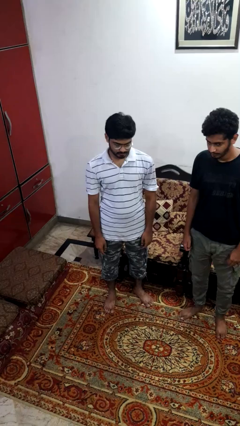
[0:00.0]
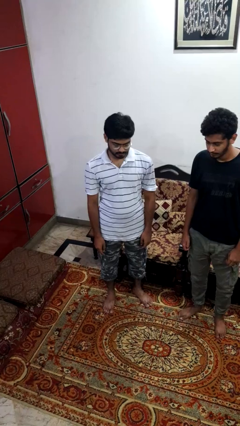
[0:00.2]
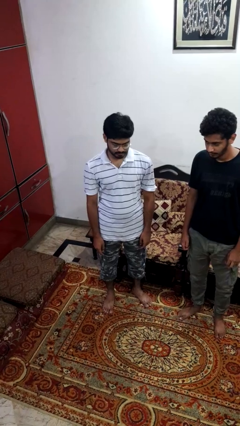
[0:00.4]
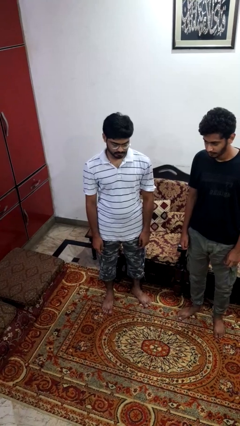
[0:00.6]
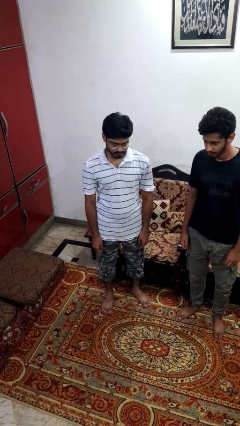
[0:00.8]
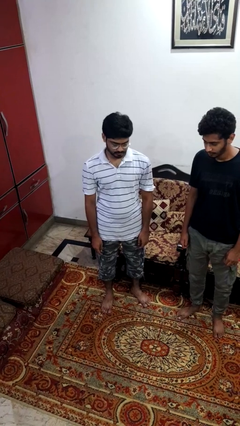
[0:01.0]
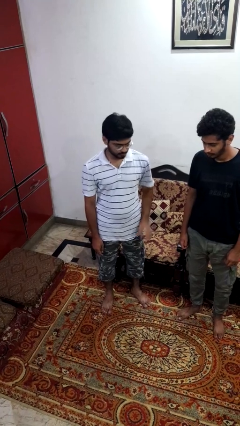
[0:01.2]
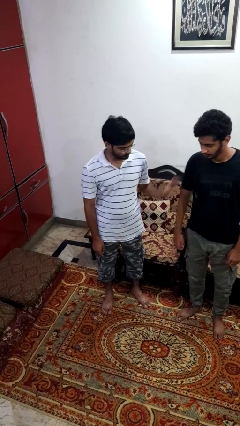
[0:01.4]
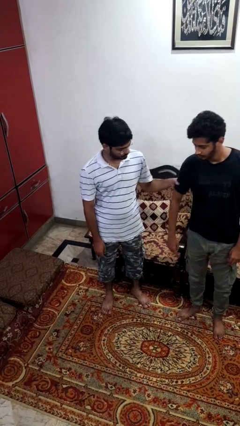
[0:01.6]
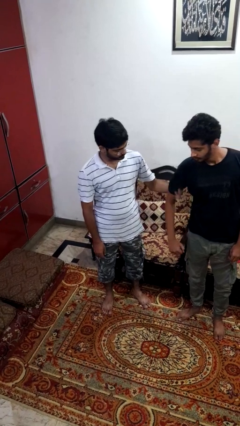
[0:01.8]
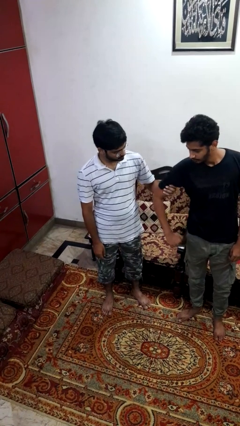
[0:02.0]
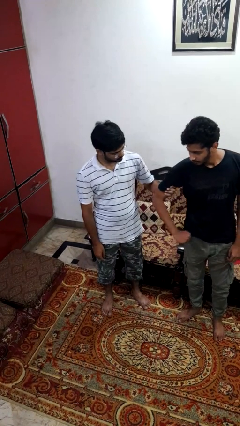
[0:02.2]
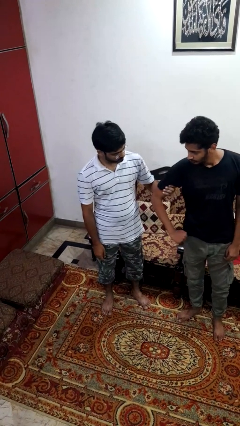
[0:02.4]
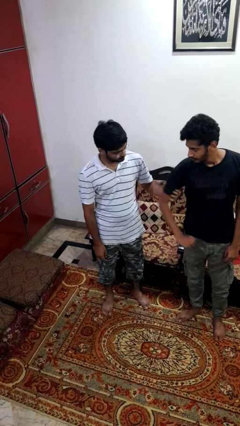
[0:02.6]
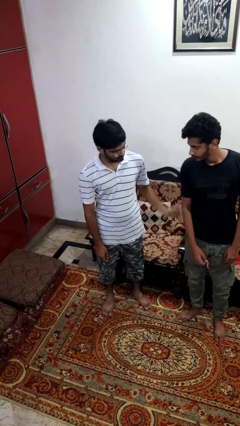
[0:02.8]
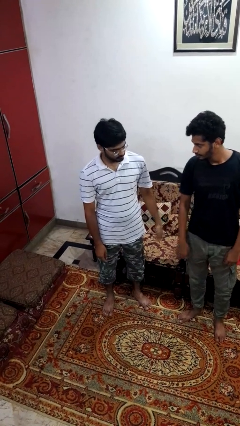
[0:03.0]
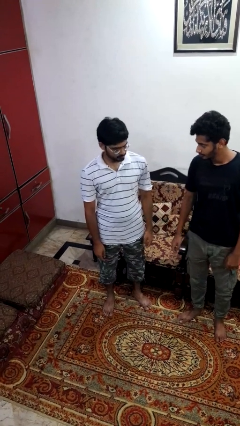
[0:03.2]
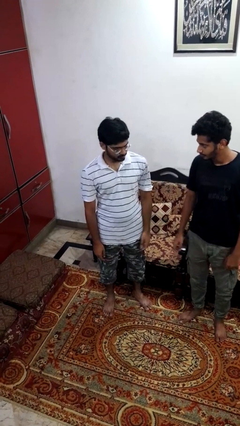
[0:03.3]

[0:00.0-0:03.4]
person grabs person by bicep

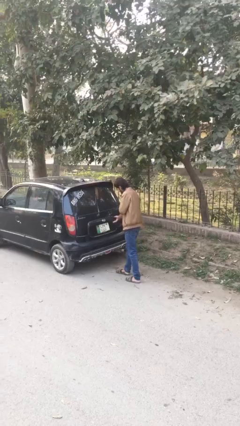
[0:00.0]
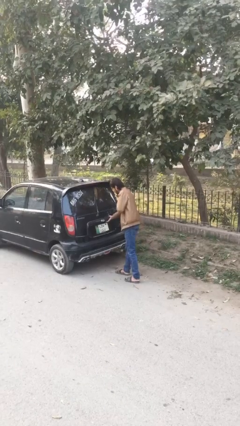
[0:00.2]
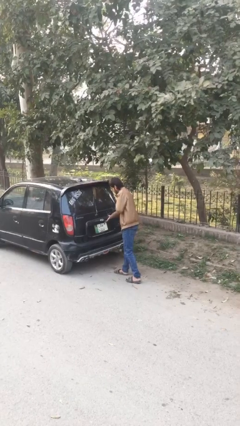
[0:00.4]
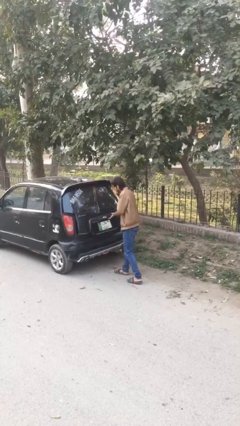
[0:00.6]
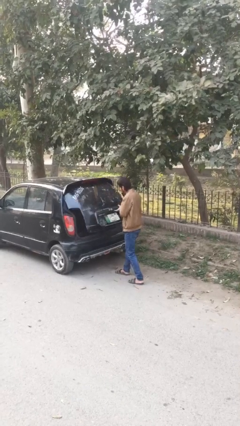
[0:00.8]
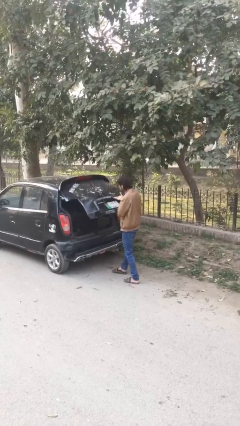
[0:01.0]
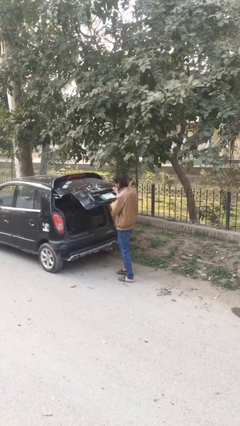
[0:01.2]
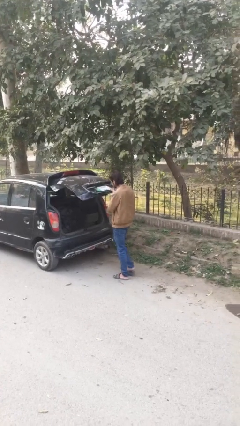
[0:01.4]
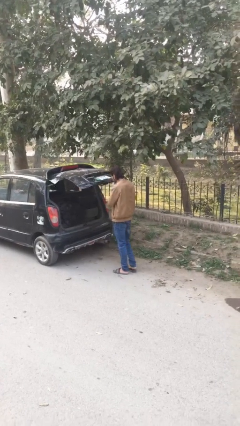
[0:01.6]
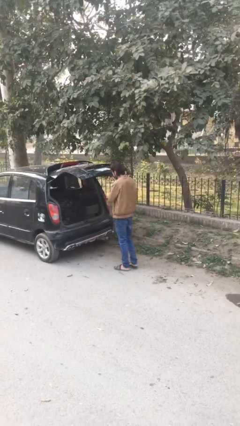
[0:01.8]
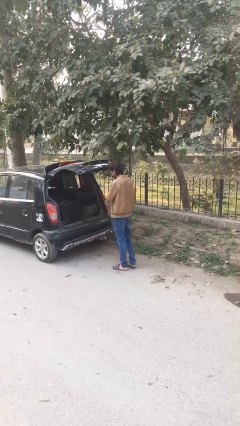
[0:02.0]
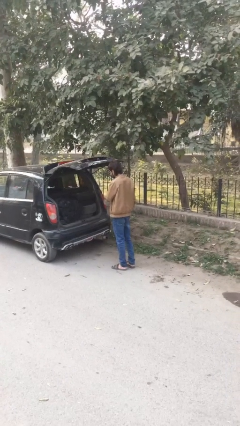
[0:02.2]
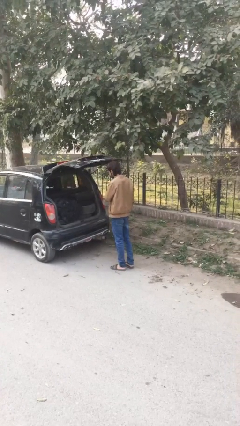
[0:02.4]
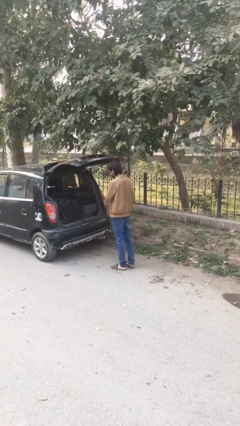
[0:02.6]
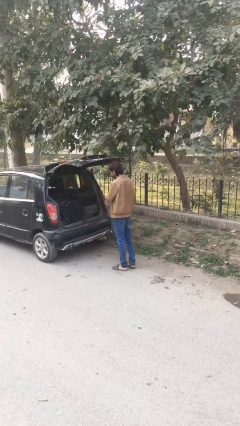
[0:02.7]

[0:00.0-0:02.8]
person opens car trunk

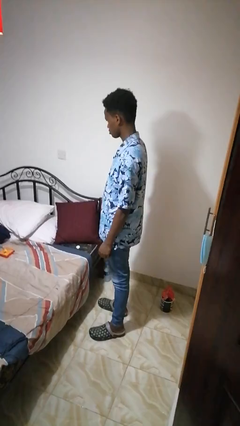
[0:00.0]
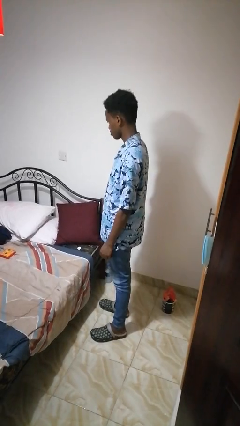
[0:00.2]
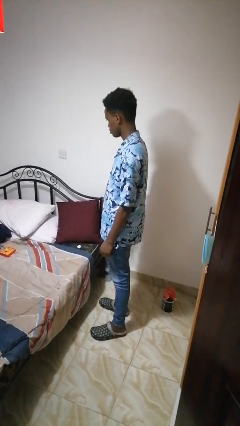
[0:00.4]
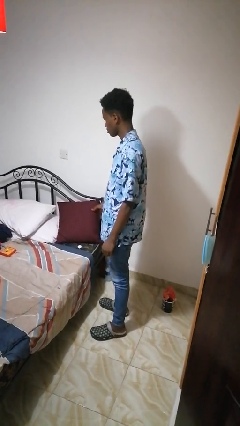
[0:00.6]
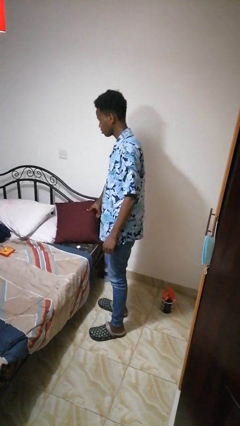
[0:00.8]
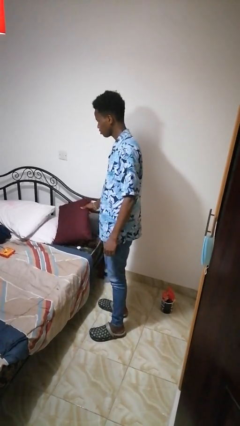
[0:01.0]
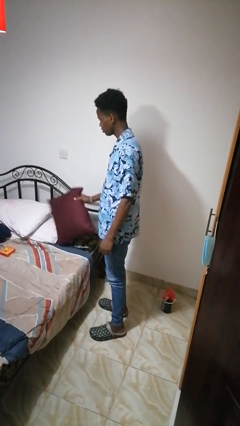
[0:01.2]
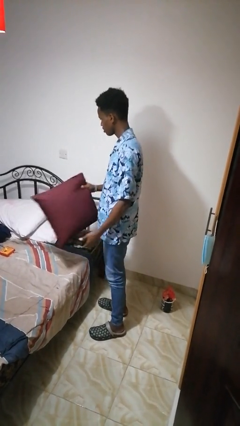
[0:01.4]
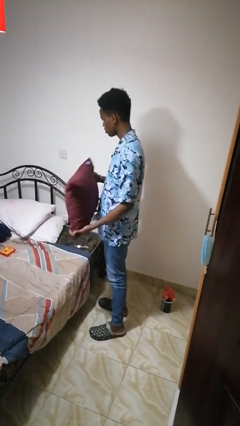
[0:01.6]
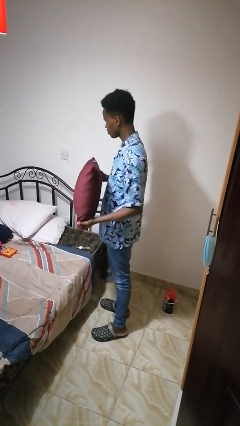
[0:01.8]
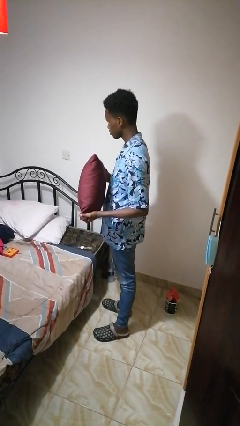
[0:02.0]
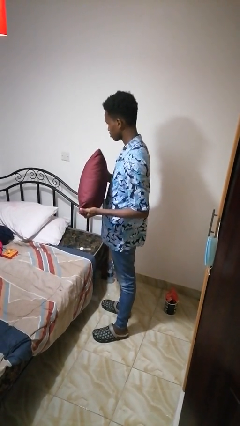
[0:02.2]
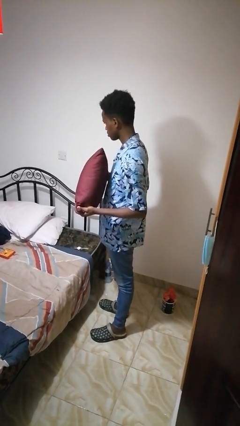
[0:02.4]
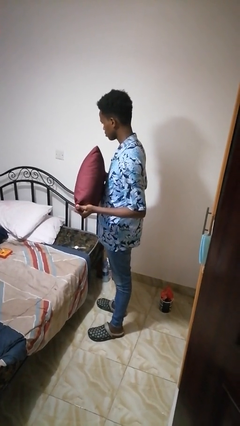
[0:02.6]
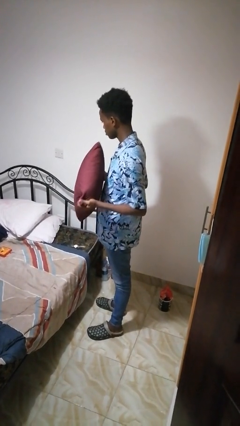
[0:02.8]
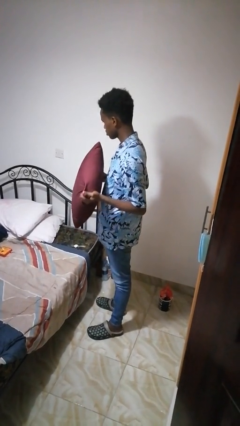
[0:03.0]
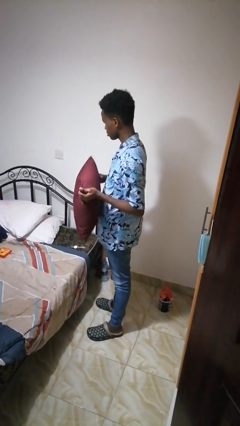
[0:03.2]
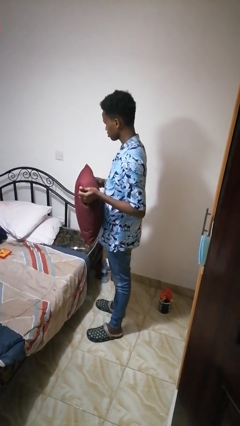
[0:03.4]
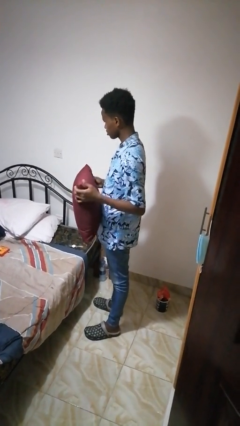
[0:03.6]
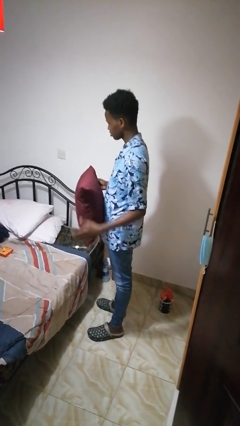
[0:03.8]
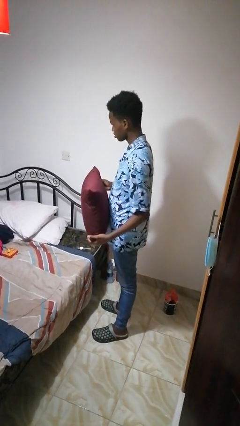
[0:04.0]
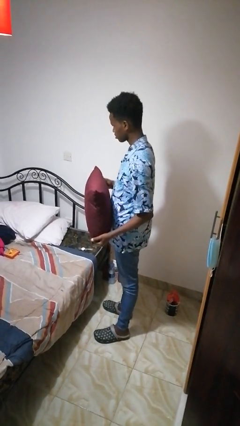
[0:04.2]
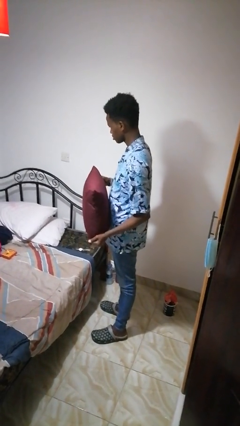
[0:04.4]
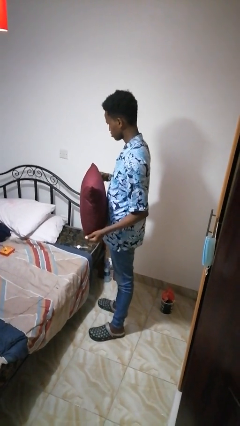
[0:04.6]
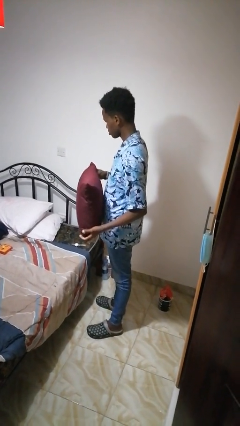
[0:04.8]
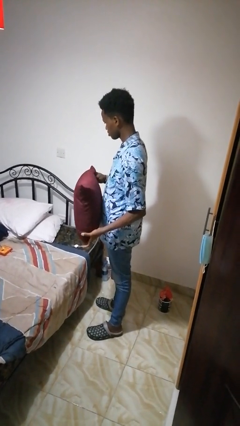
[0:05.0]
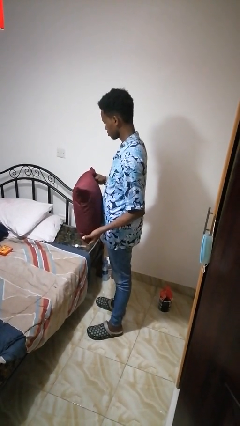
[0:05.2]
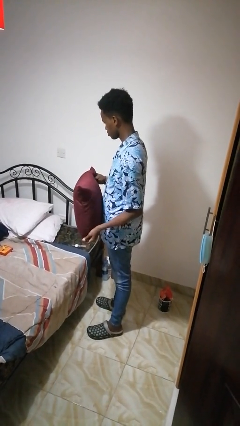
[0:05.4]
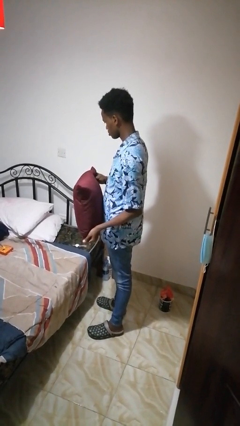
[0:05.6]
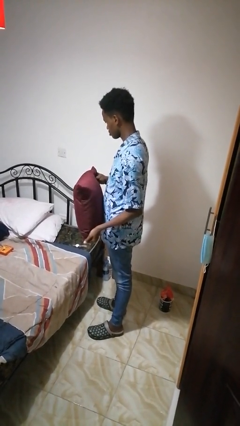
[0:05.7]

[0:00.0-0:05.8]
person picks up object from bed

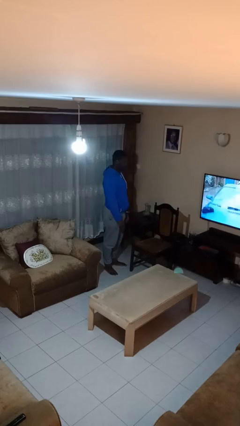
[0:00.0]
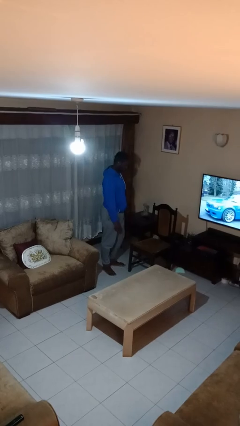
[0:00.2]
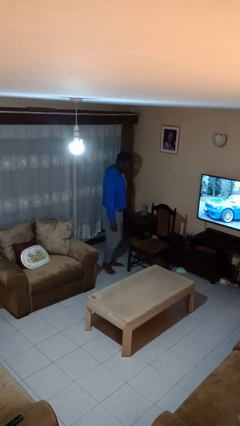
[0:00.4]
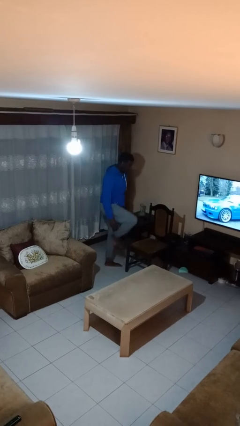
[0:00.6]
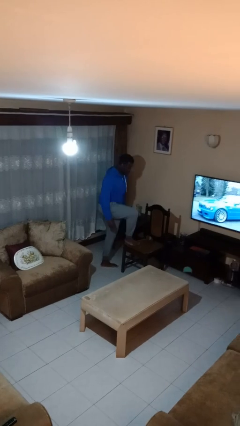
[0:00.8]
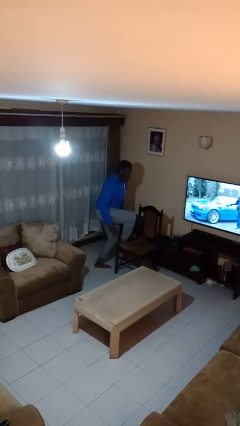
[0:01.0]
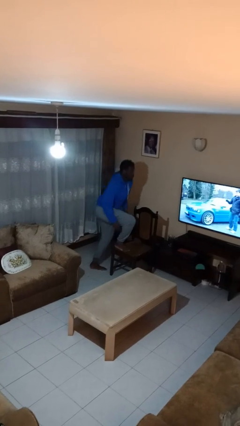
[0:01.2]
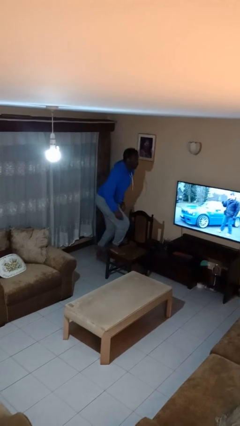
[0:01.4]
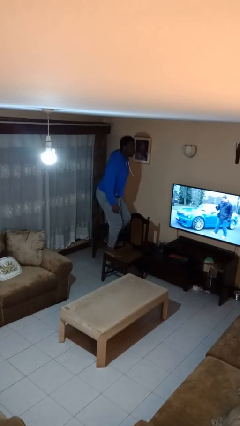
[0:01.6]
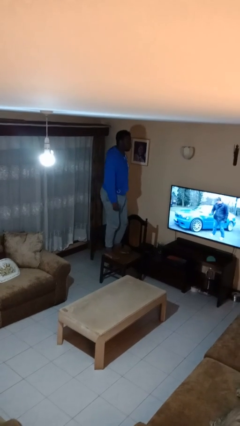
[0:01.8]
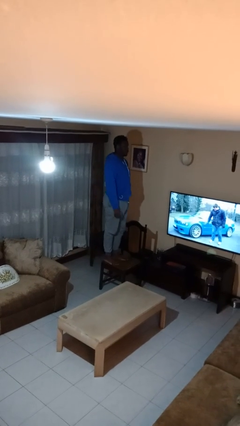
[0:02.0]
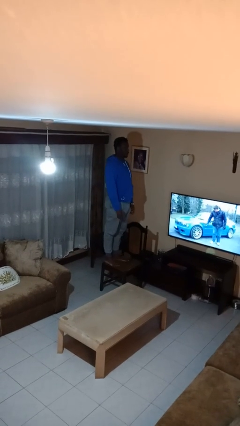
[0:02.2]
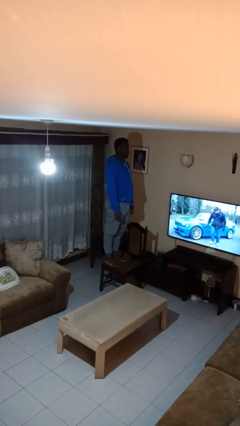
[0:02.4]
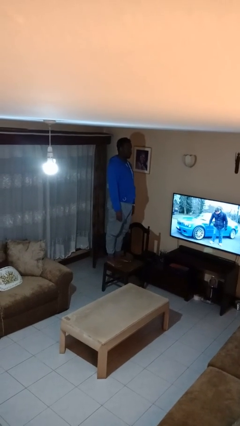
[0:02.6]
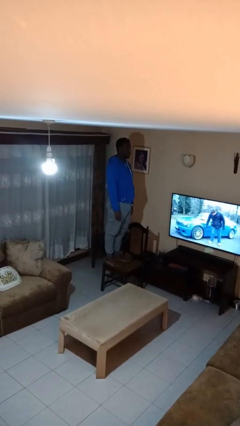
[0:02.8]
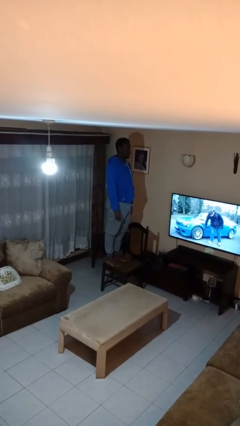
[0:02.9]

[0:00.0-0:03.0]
person climbs on chair

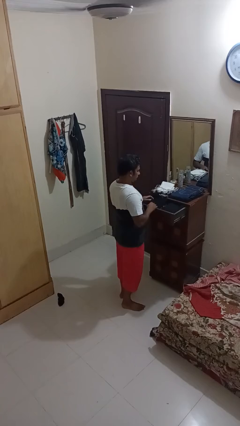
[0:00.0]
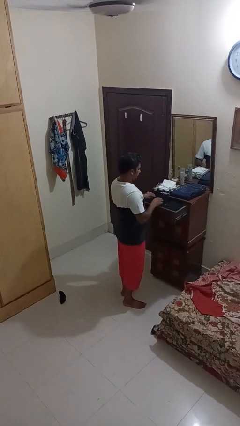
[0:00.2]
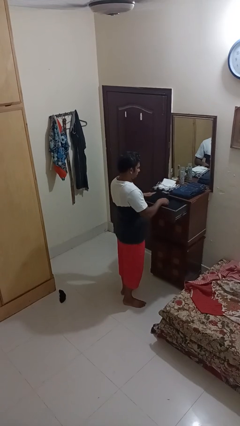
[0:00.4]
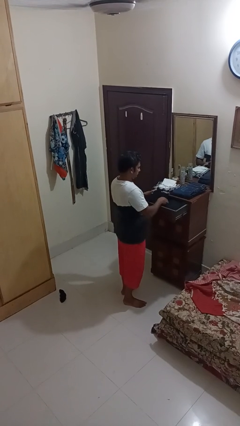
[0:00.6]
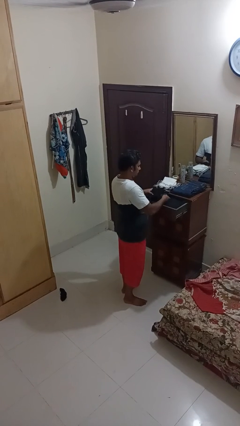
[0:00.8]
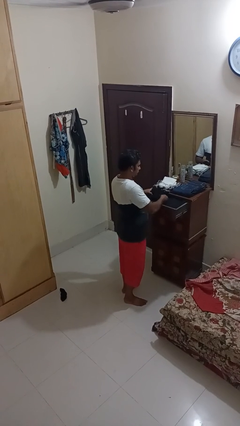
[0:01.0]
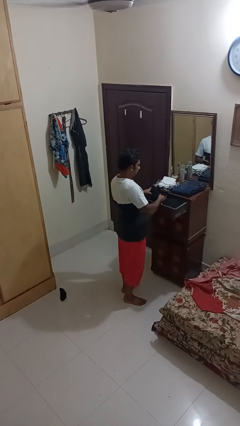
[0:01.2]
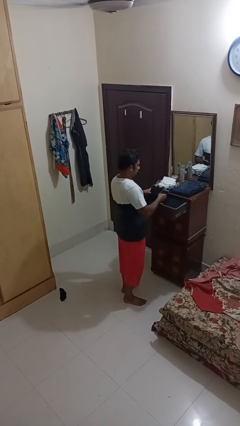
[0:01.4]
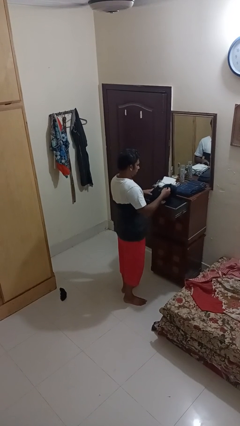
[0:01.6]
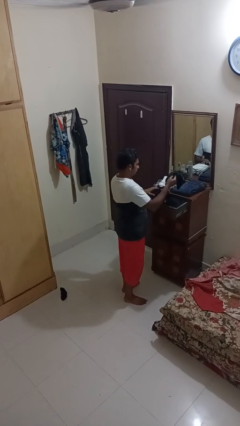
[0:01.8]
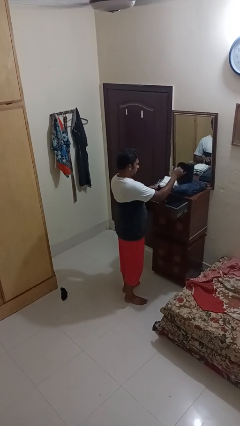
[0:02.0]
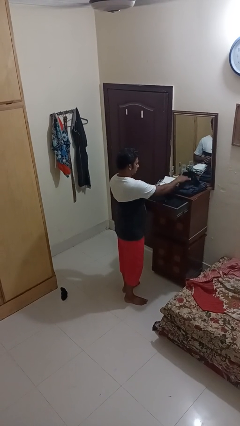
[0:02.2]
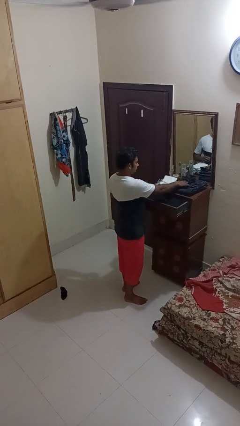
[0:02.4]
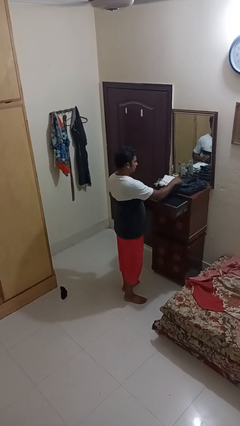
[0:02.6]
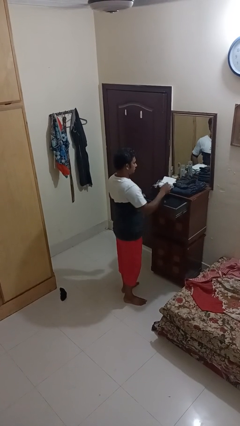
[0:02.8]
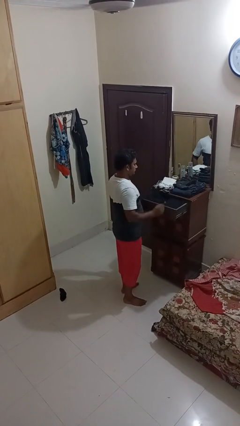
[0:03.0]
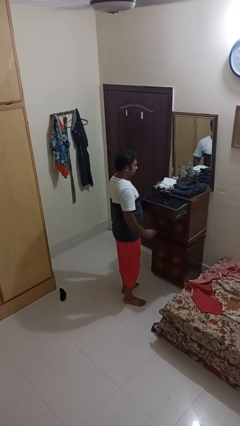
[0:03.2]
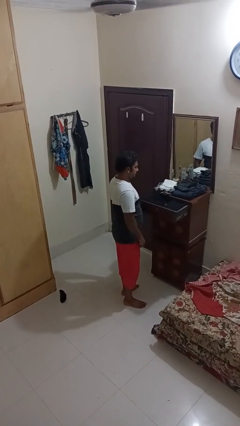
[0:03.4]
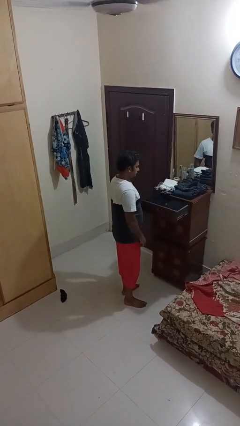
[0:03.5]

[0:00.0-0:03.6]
person takes clothes from dresser
